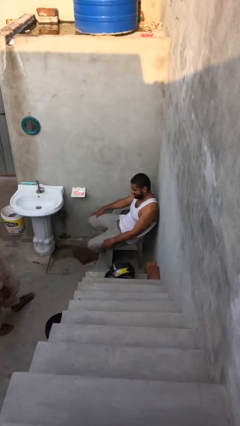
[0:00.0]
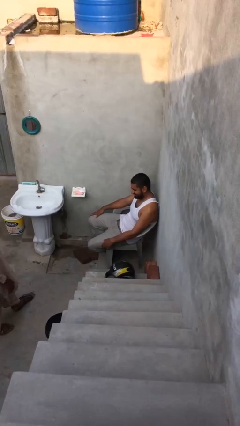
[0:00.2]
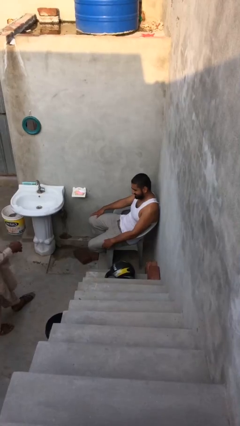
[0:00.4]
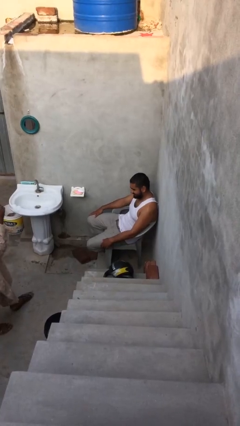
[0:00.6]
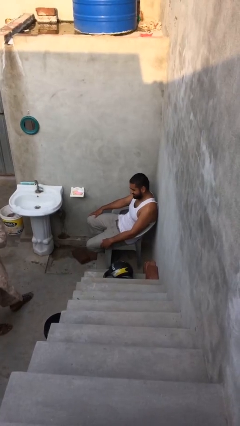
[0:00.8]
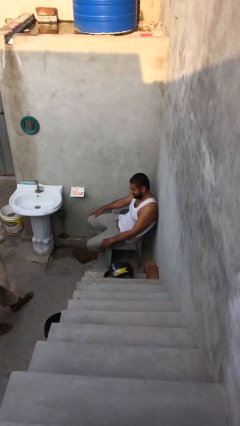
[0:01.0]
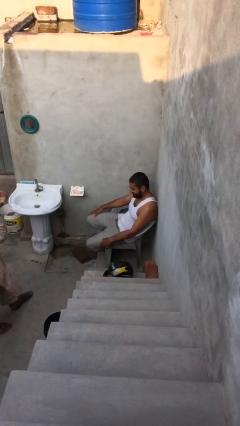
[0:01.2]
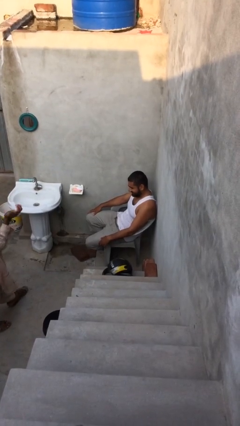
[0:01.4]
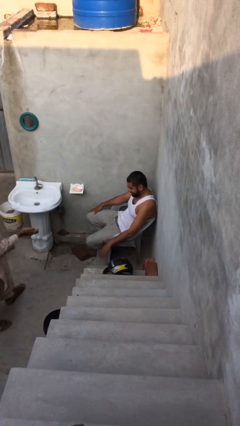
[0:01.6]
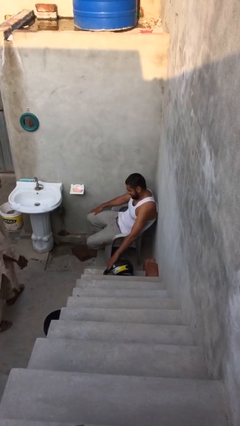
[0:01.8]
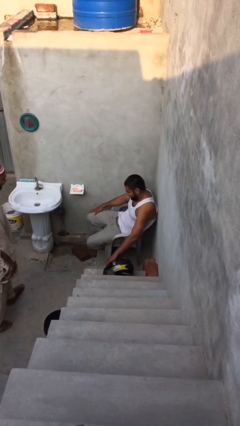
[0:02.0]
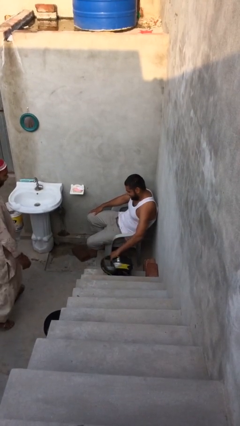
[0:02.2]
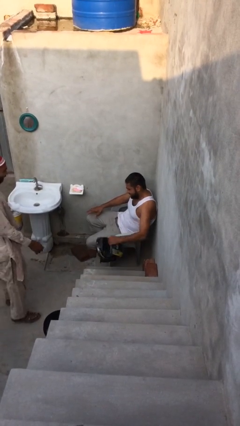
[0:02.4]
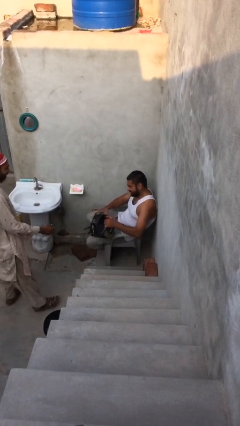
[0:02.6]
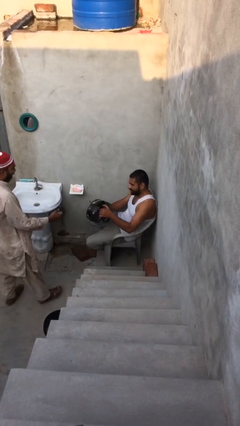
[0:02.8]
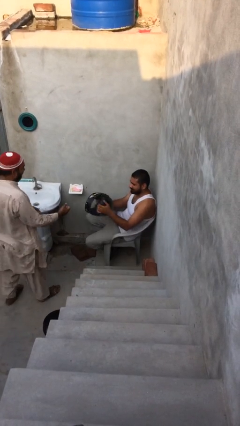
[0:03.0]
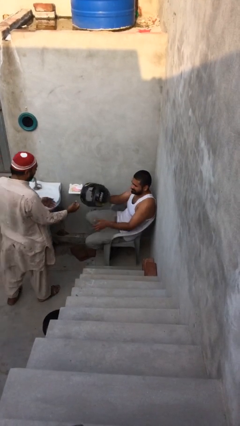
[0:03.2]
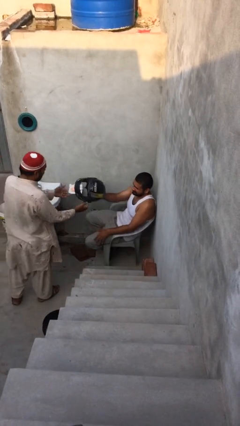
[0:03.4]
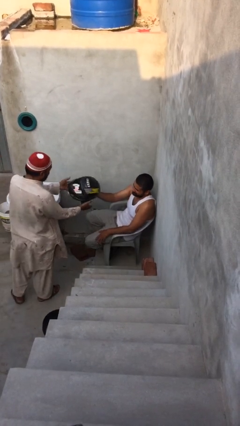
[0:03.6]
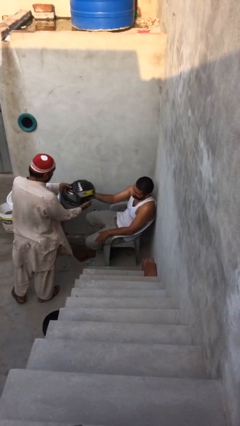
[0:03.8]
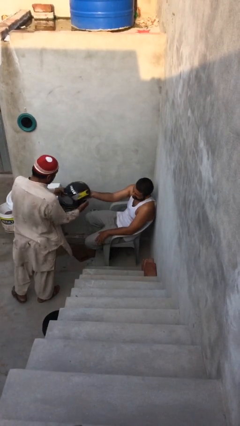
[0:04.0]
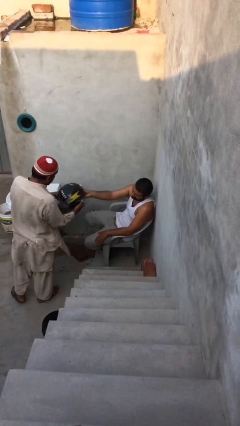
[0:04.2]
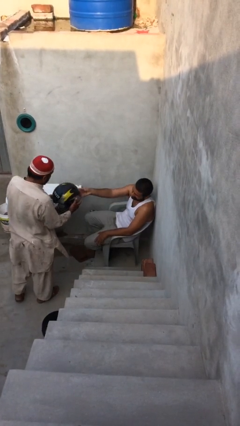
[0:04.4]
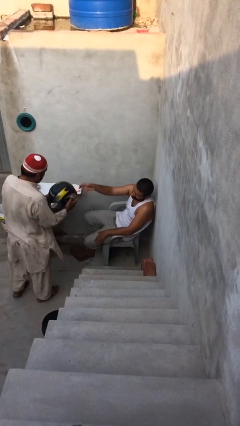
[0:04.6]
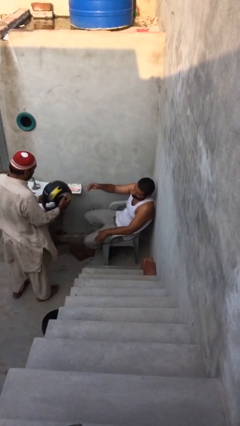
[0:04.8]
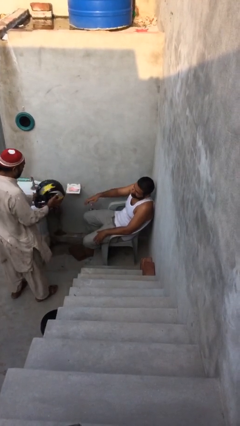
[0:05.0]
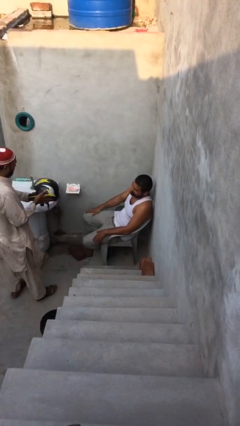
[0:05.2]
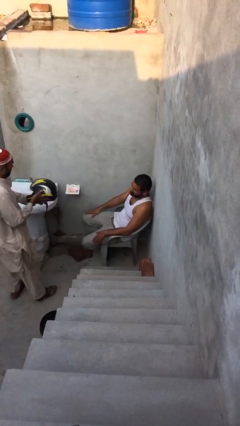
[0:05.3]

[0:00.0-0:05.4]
person transfers object to person

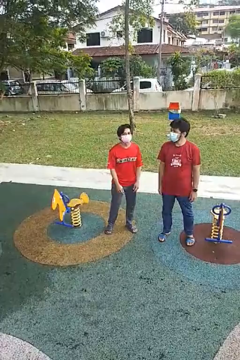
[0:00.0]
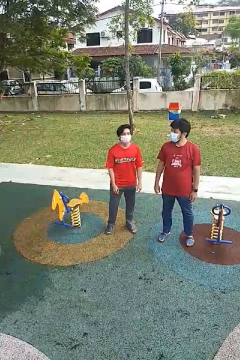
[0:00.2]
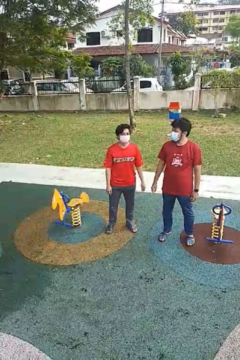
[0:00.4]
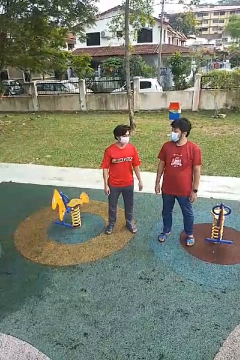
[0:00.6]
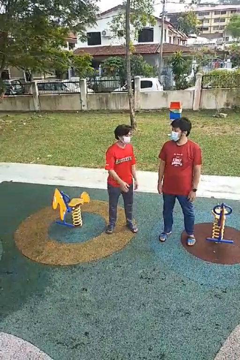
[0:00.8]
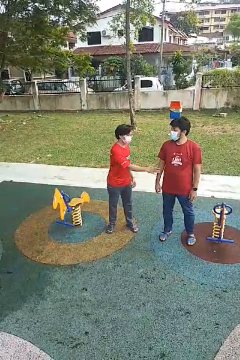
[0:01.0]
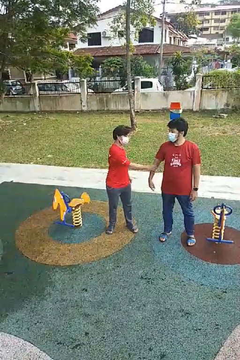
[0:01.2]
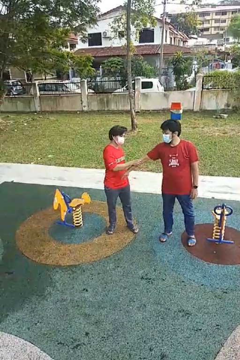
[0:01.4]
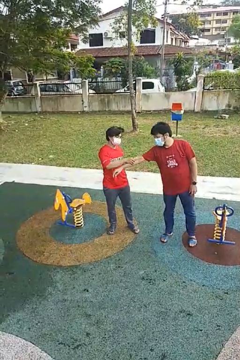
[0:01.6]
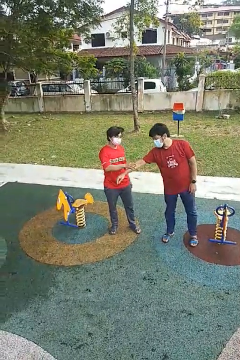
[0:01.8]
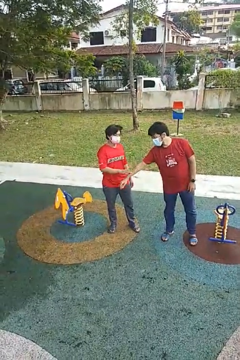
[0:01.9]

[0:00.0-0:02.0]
person grabs person by forearm

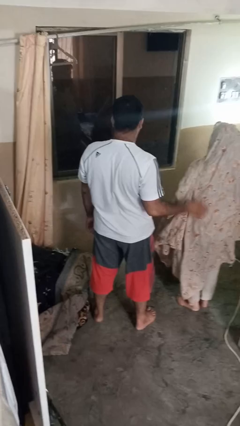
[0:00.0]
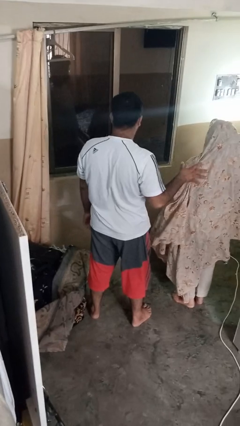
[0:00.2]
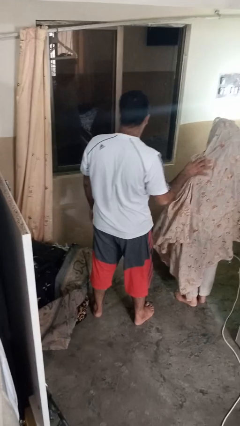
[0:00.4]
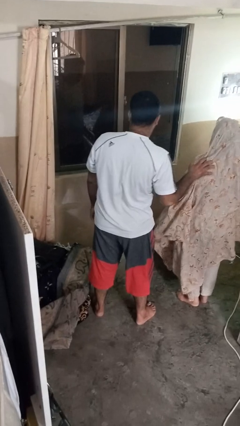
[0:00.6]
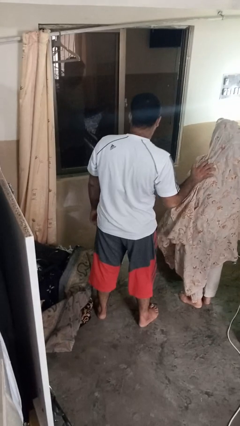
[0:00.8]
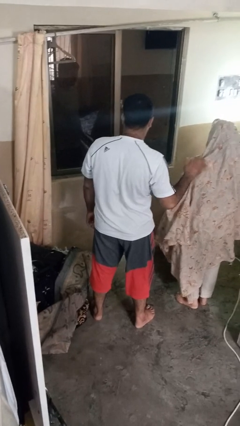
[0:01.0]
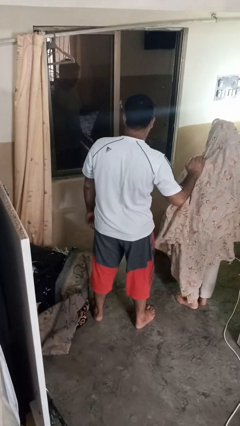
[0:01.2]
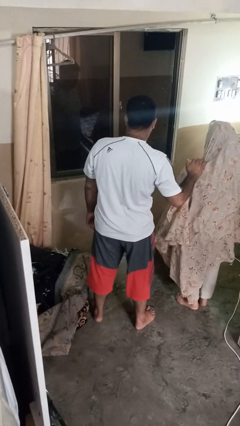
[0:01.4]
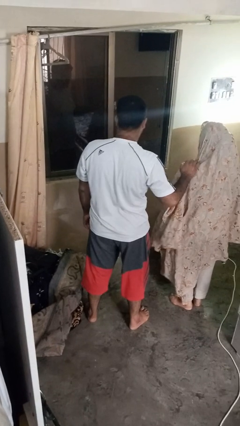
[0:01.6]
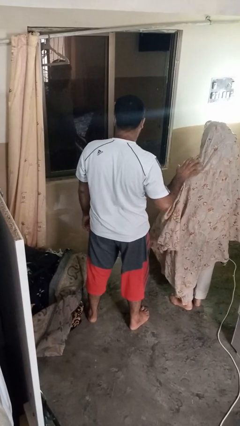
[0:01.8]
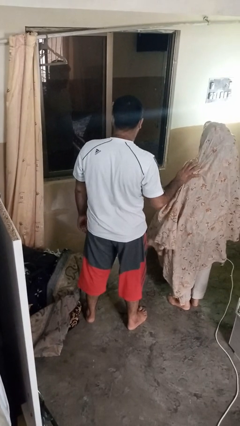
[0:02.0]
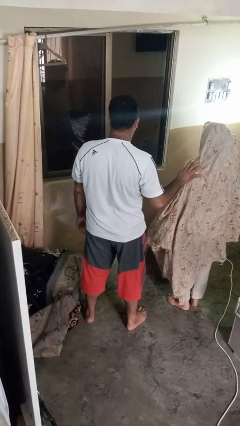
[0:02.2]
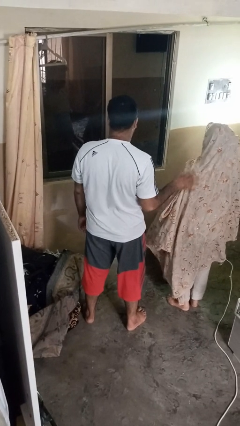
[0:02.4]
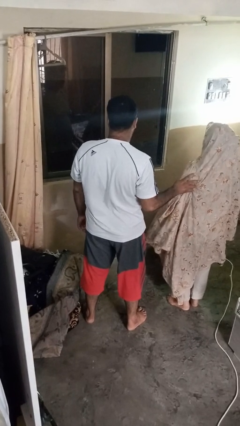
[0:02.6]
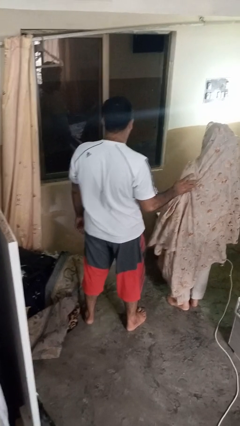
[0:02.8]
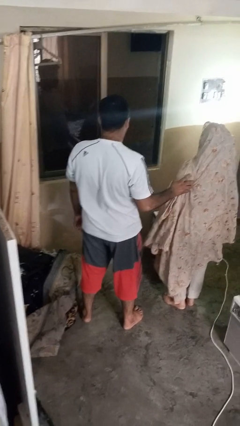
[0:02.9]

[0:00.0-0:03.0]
person grabs person by bicep

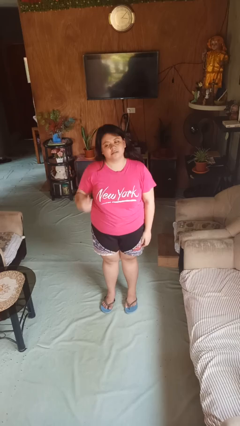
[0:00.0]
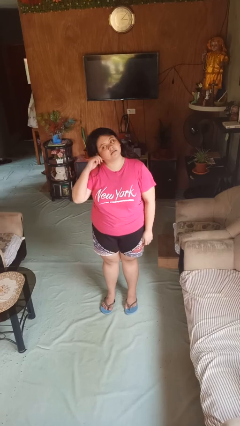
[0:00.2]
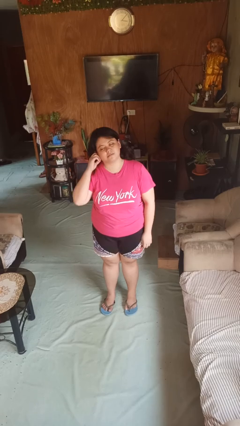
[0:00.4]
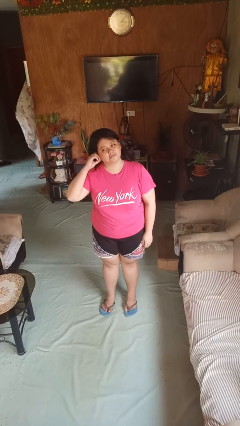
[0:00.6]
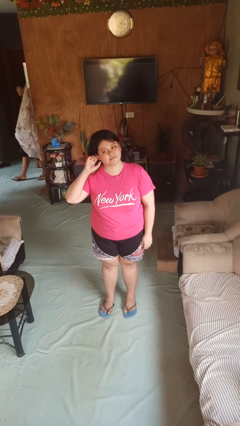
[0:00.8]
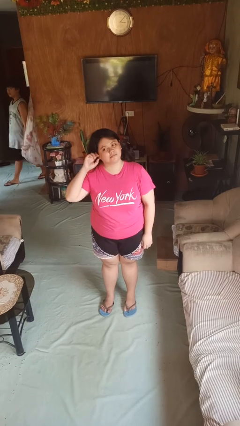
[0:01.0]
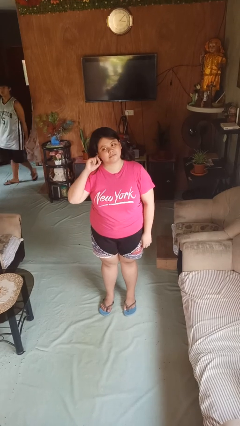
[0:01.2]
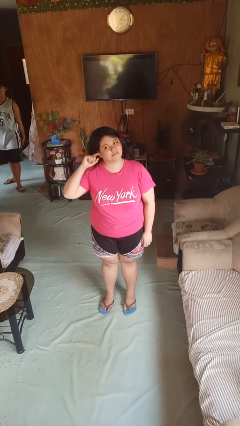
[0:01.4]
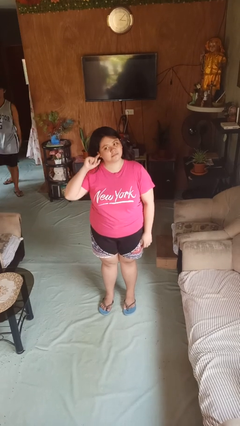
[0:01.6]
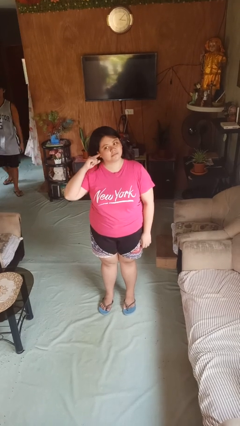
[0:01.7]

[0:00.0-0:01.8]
person touches earlobe

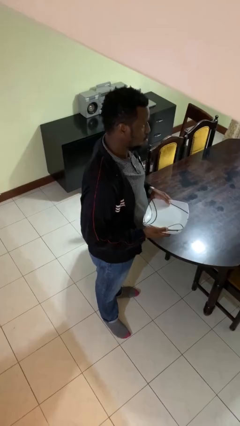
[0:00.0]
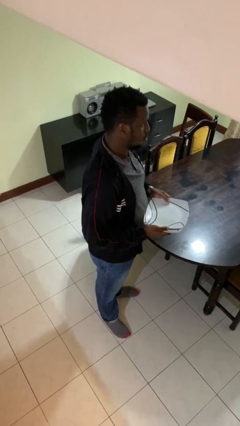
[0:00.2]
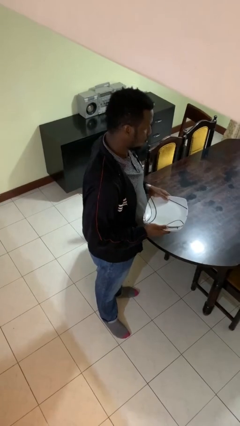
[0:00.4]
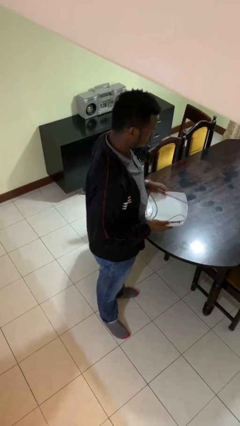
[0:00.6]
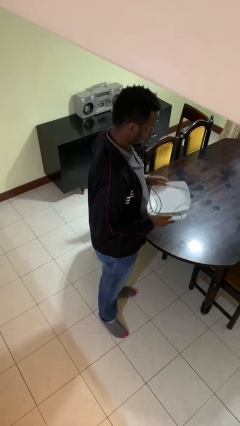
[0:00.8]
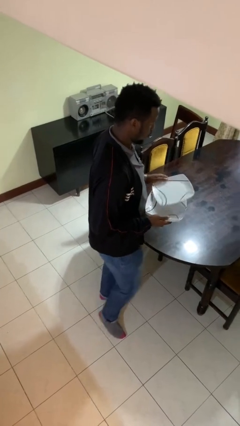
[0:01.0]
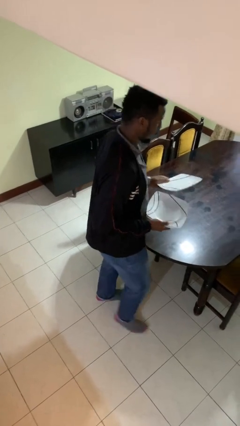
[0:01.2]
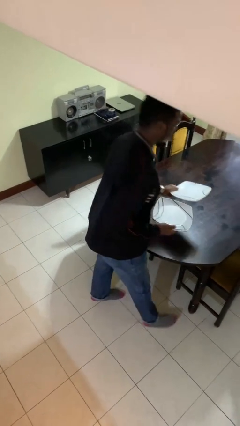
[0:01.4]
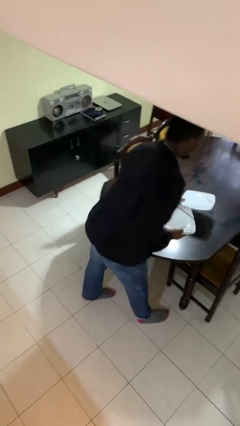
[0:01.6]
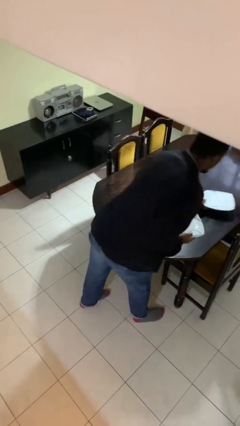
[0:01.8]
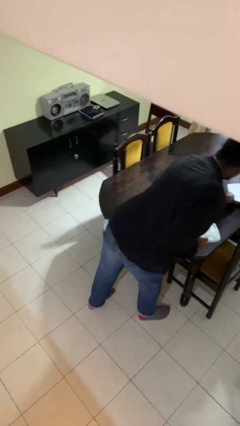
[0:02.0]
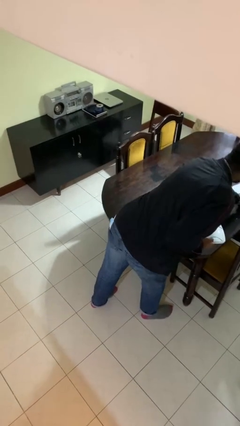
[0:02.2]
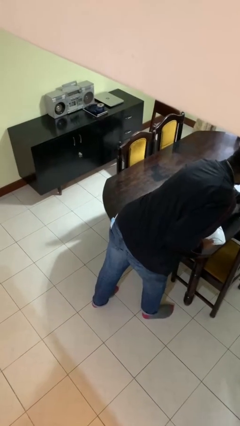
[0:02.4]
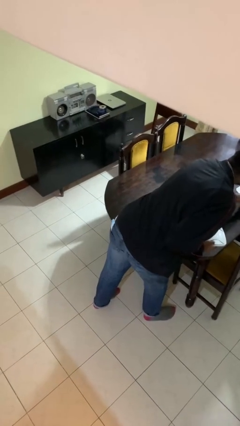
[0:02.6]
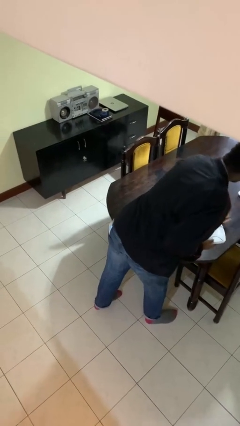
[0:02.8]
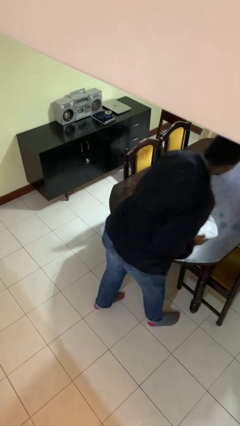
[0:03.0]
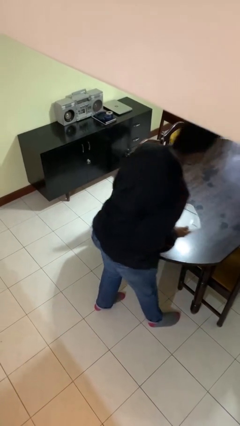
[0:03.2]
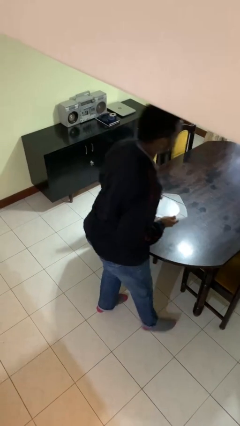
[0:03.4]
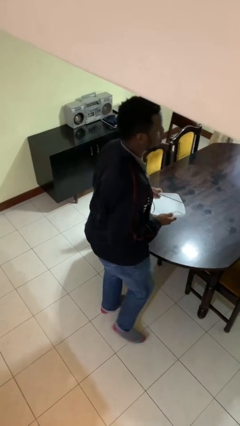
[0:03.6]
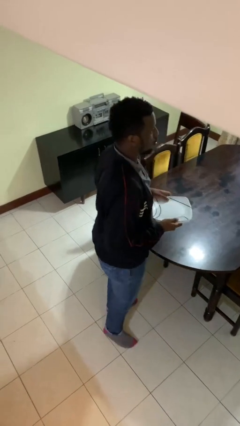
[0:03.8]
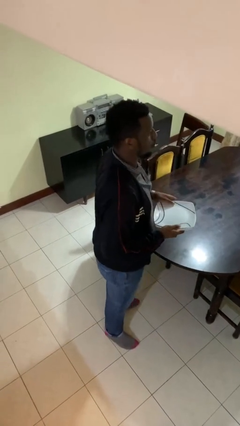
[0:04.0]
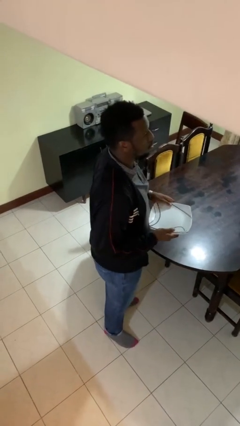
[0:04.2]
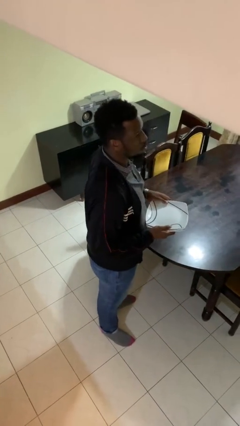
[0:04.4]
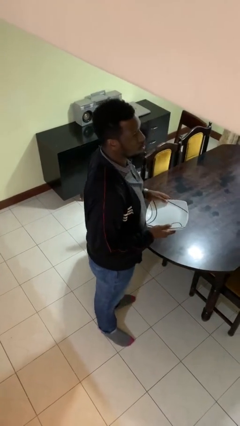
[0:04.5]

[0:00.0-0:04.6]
person sets table

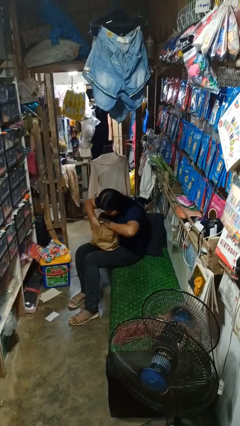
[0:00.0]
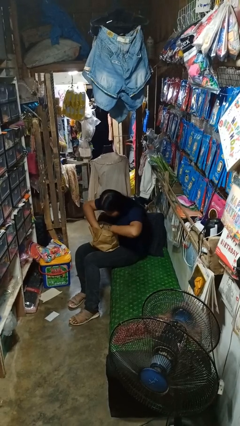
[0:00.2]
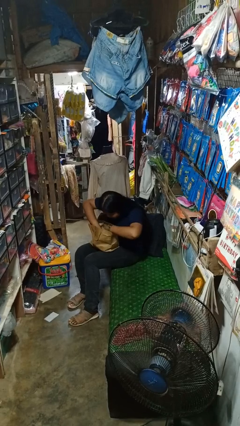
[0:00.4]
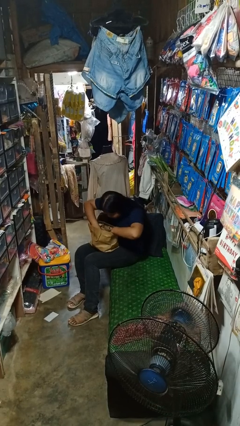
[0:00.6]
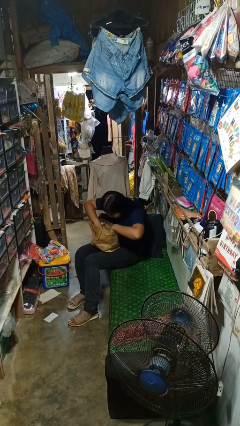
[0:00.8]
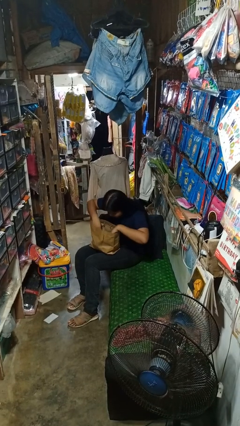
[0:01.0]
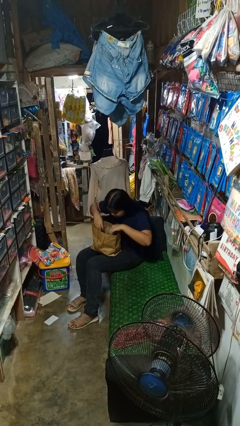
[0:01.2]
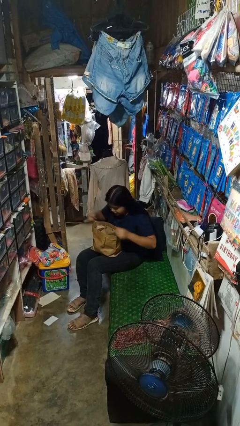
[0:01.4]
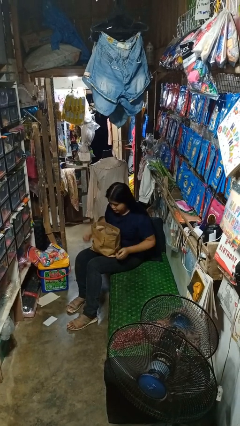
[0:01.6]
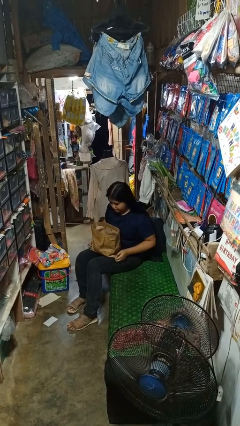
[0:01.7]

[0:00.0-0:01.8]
person searches in bag
